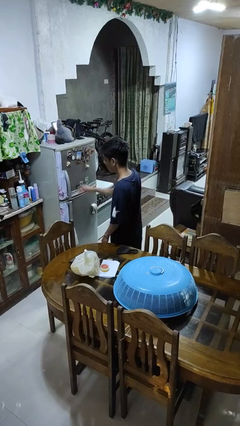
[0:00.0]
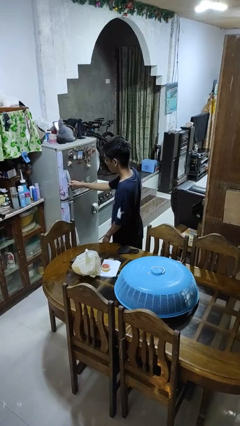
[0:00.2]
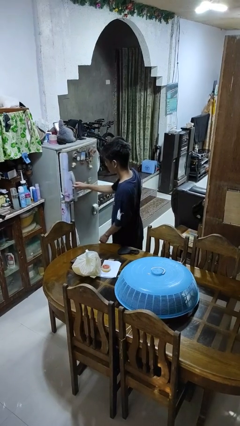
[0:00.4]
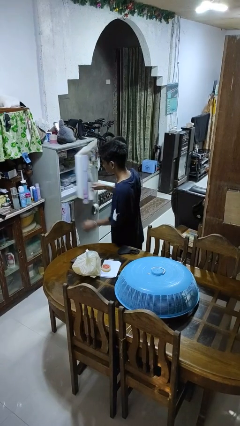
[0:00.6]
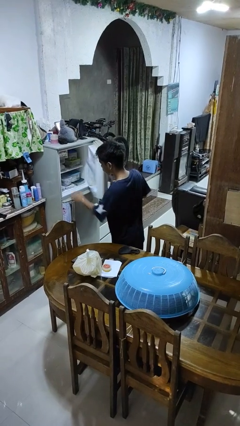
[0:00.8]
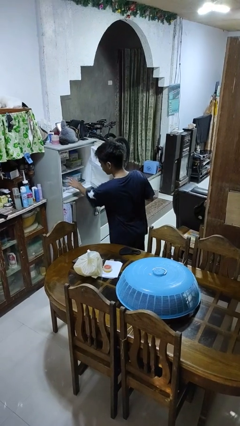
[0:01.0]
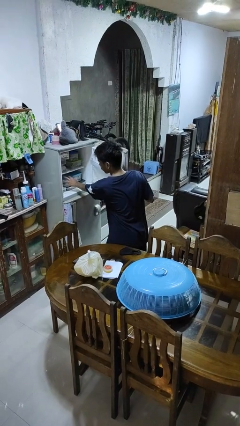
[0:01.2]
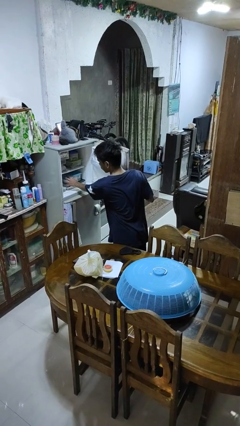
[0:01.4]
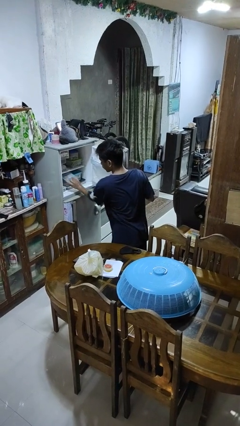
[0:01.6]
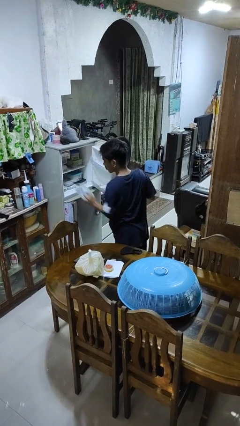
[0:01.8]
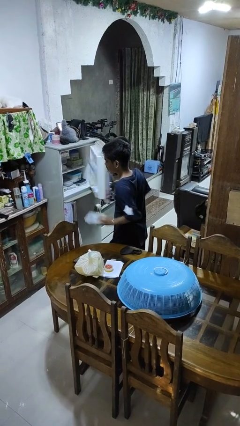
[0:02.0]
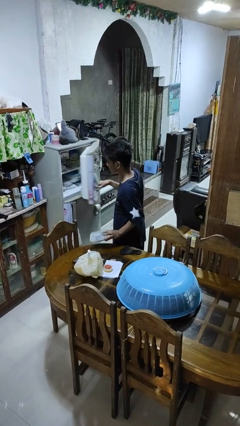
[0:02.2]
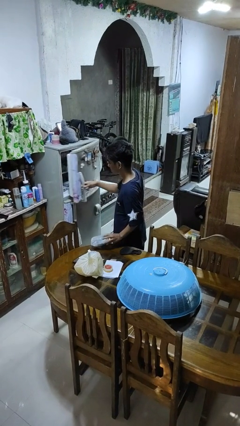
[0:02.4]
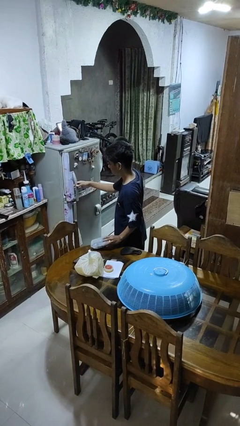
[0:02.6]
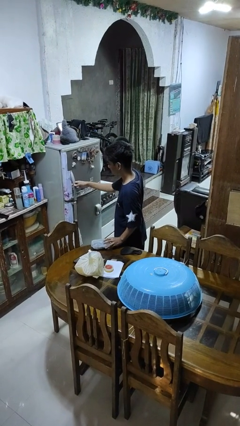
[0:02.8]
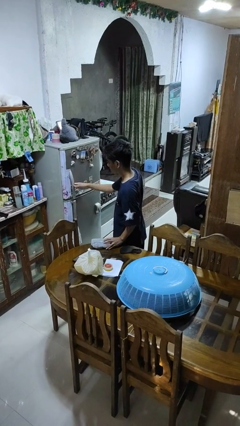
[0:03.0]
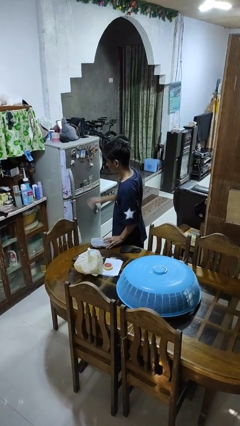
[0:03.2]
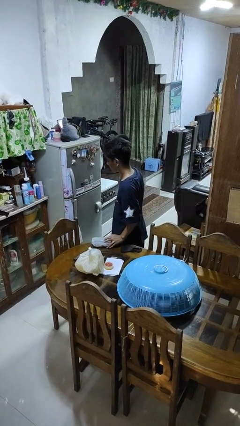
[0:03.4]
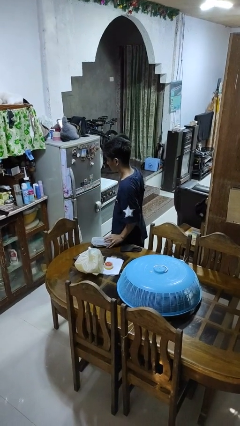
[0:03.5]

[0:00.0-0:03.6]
person takes object from refrigerator

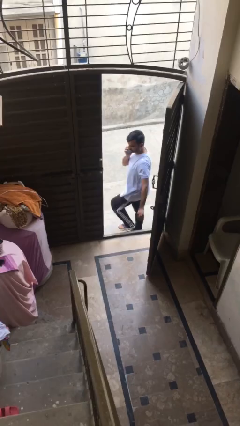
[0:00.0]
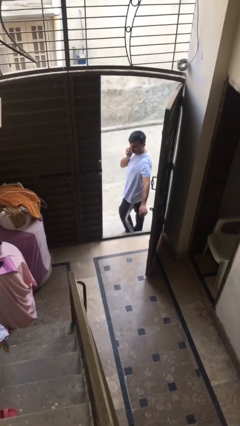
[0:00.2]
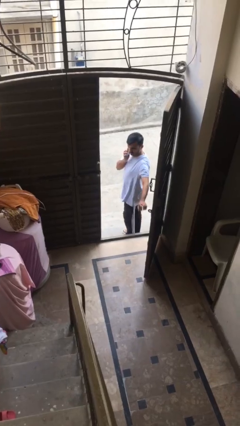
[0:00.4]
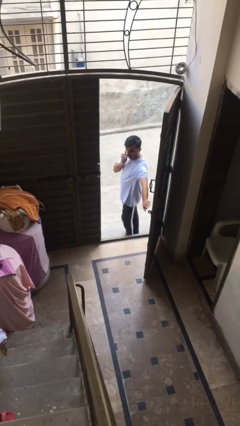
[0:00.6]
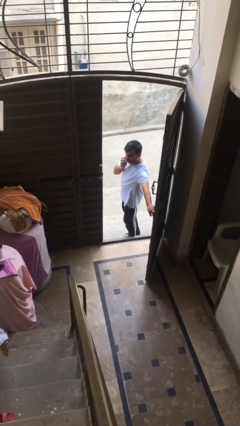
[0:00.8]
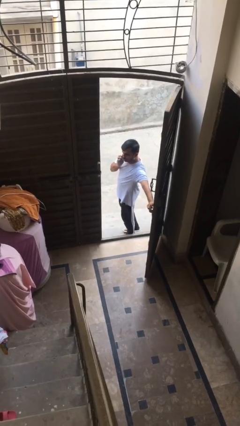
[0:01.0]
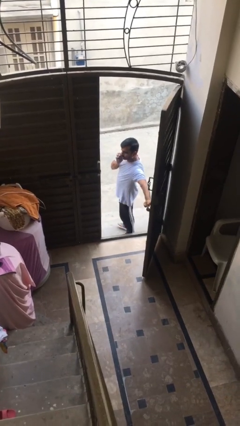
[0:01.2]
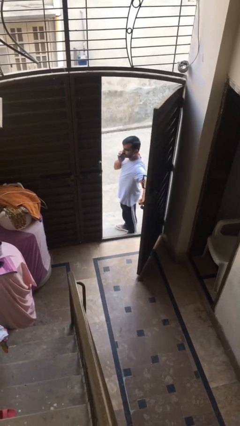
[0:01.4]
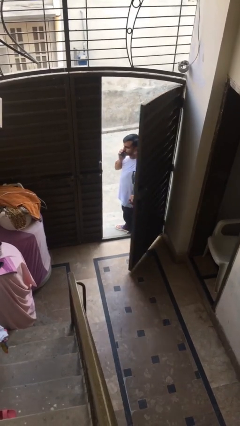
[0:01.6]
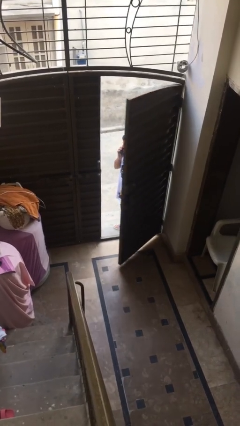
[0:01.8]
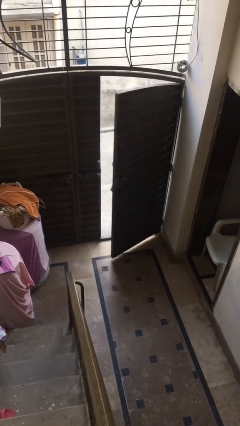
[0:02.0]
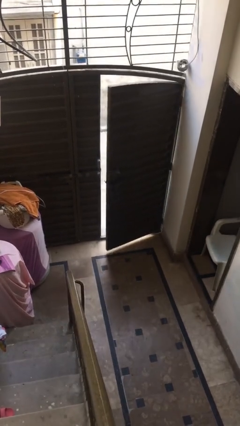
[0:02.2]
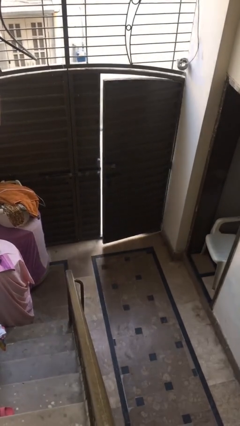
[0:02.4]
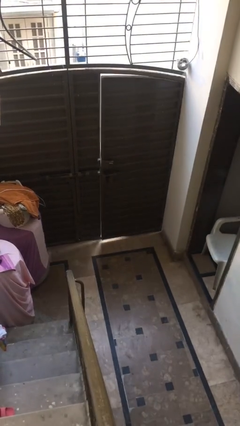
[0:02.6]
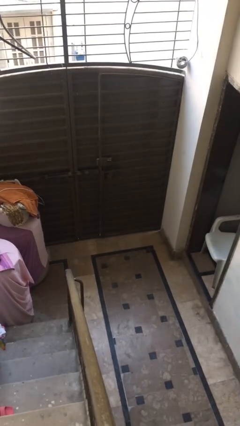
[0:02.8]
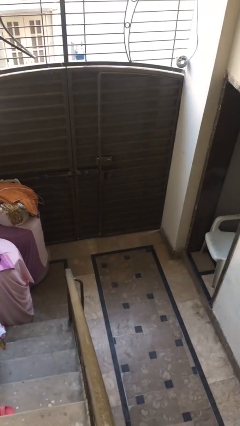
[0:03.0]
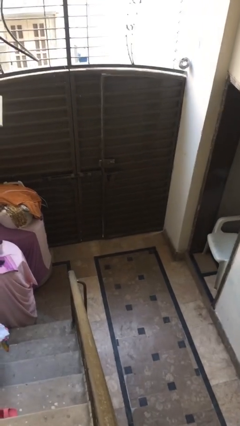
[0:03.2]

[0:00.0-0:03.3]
person closes facility door

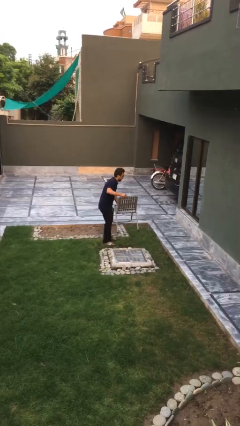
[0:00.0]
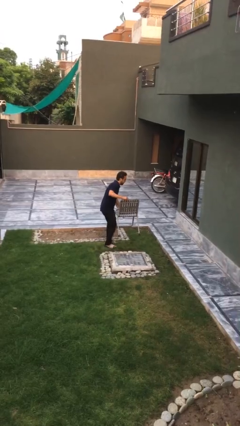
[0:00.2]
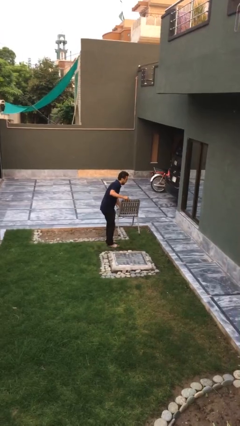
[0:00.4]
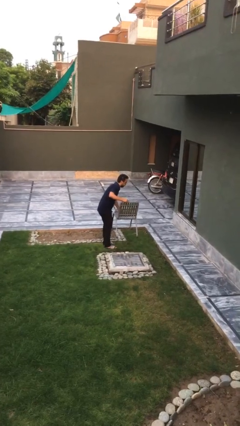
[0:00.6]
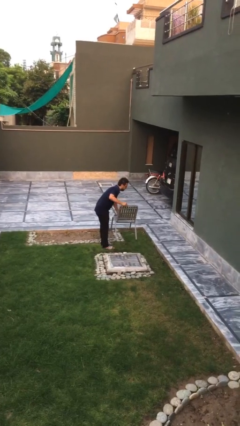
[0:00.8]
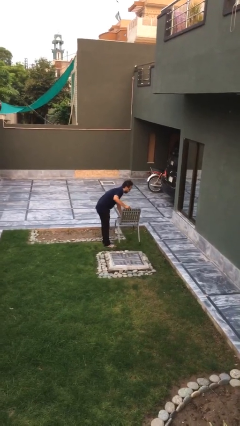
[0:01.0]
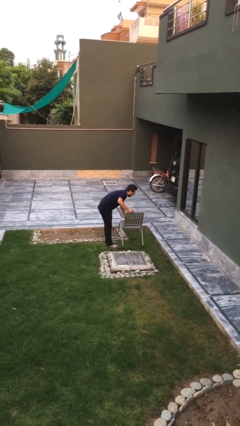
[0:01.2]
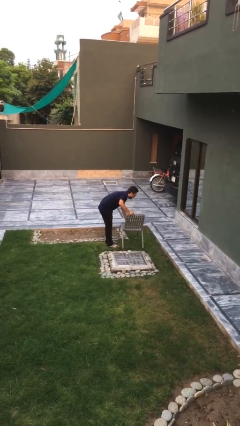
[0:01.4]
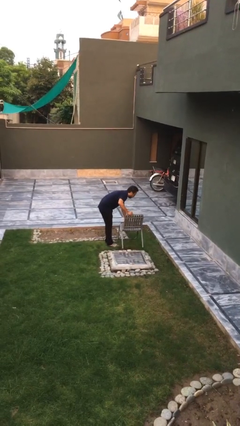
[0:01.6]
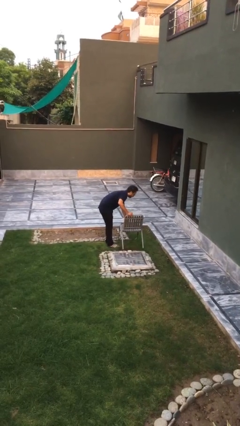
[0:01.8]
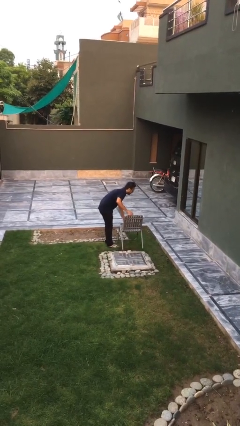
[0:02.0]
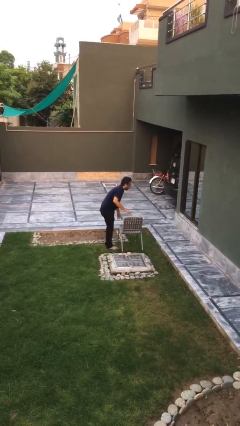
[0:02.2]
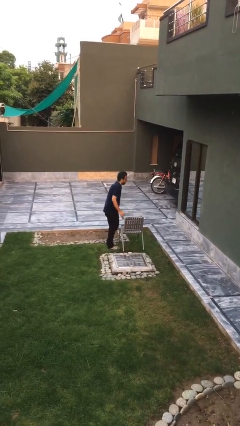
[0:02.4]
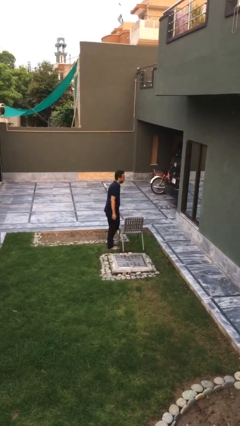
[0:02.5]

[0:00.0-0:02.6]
person puts down object on floor

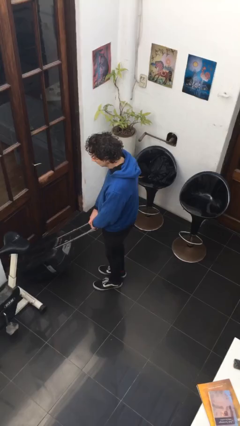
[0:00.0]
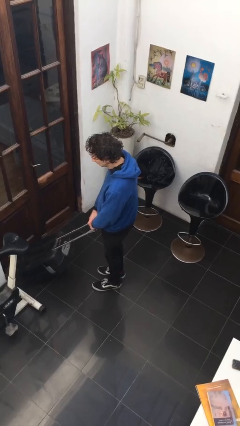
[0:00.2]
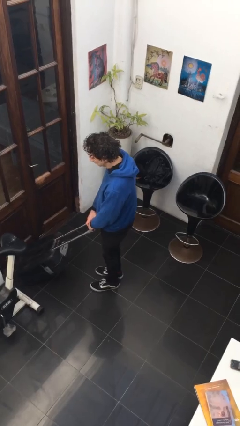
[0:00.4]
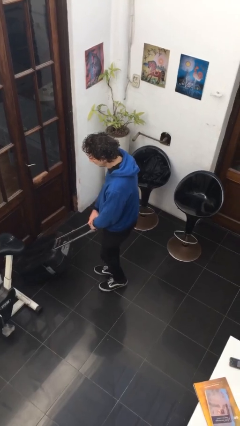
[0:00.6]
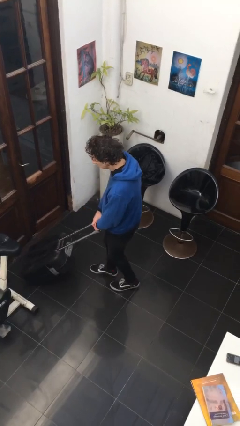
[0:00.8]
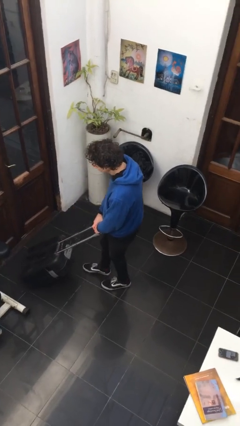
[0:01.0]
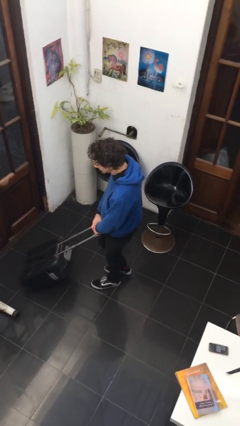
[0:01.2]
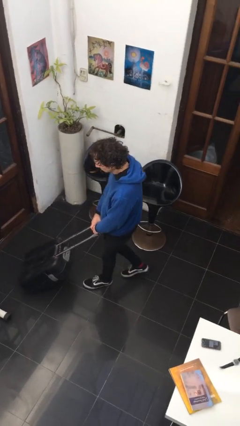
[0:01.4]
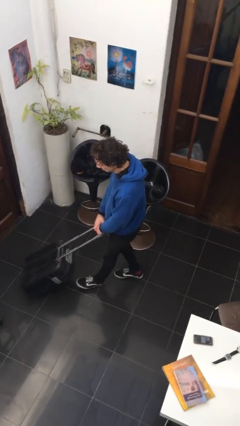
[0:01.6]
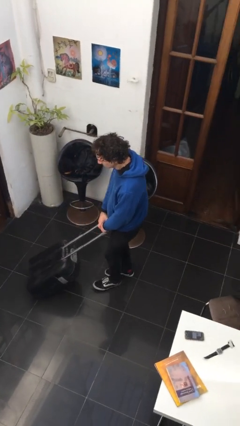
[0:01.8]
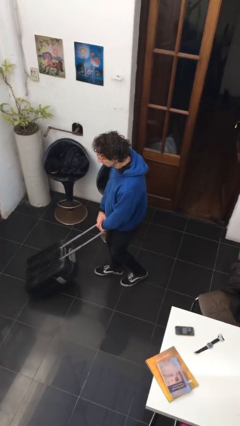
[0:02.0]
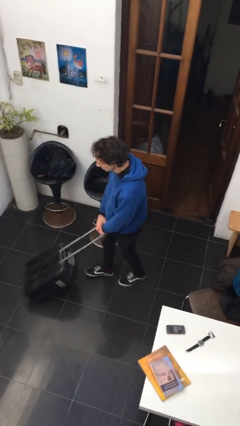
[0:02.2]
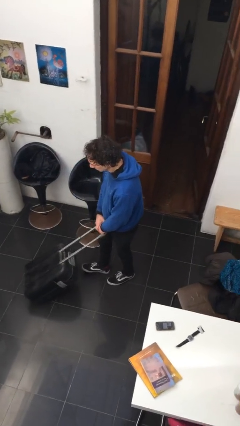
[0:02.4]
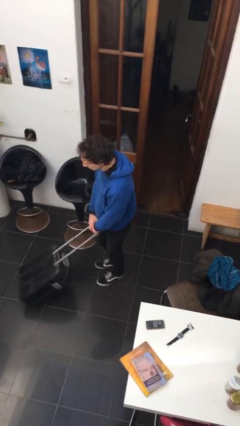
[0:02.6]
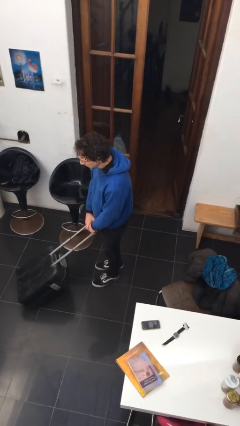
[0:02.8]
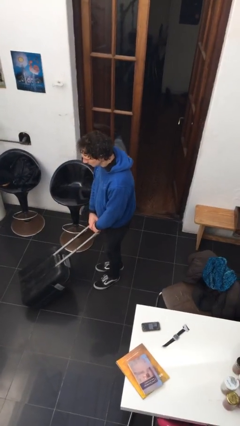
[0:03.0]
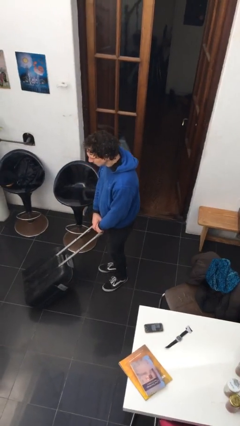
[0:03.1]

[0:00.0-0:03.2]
person pulls wheeled cart

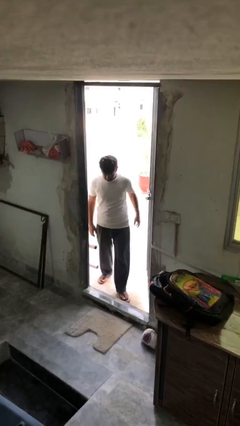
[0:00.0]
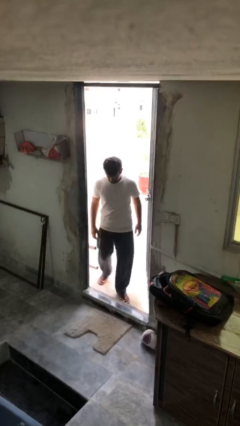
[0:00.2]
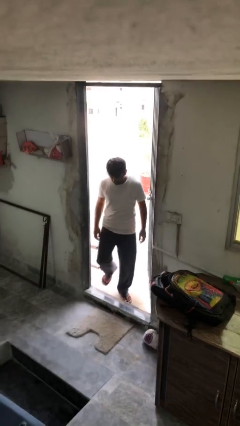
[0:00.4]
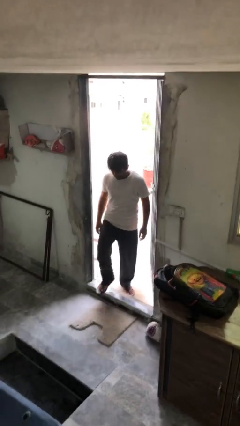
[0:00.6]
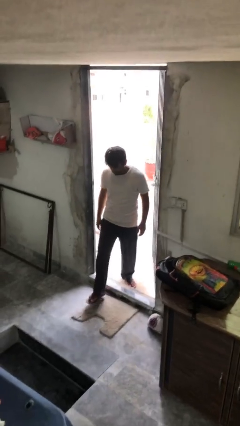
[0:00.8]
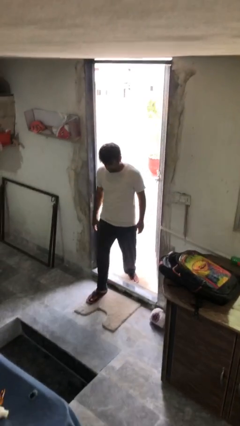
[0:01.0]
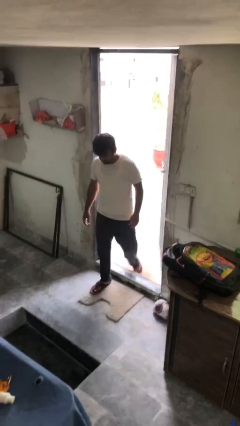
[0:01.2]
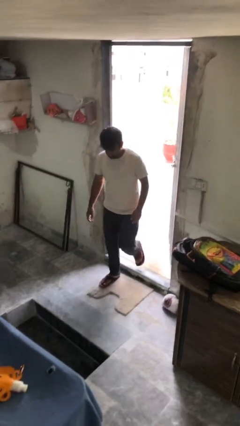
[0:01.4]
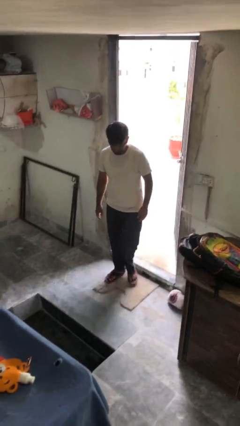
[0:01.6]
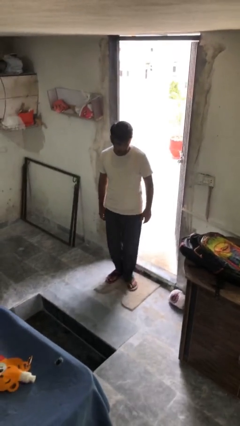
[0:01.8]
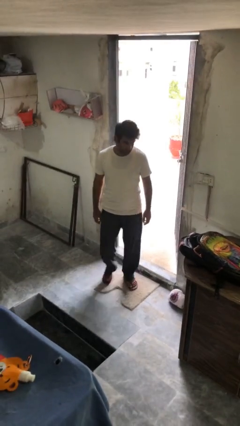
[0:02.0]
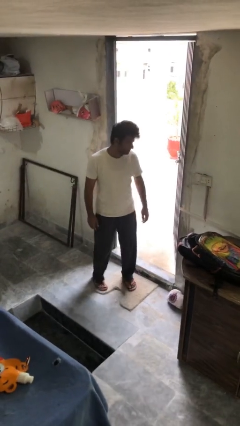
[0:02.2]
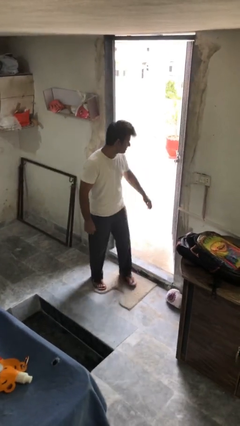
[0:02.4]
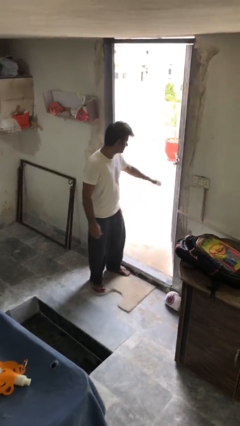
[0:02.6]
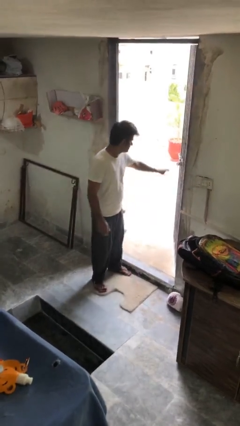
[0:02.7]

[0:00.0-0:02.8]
person enters scene through structure

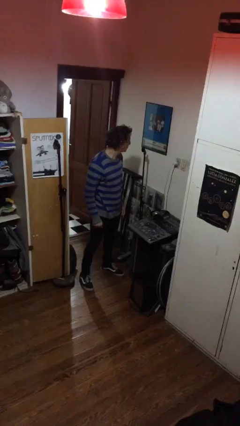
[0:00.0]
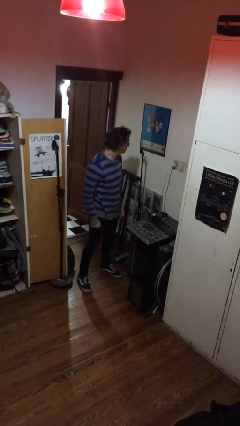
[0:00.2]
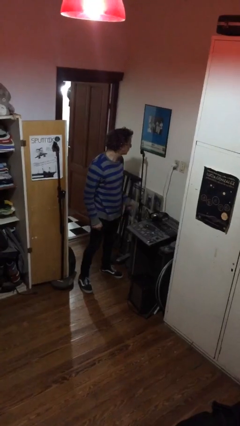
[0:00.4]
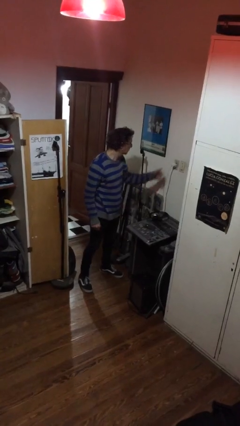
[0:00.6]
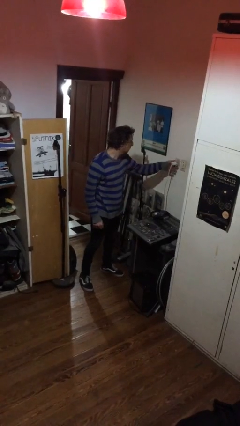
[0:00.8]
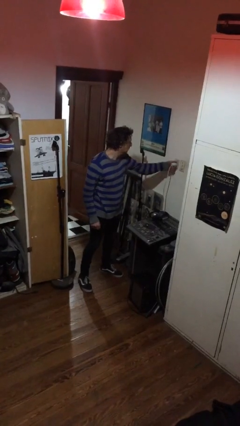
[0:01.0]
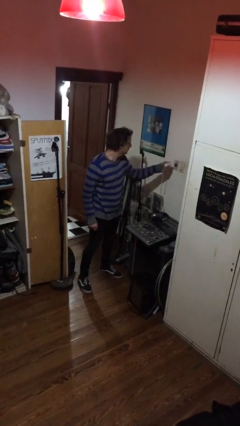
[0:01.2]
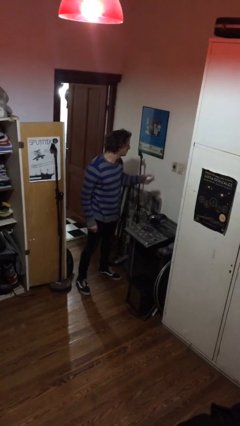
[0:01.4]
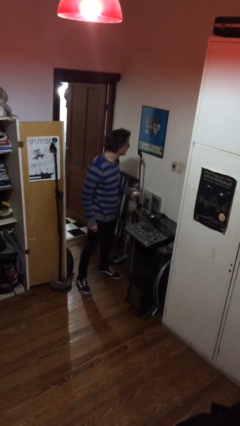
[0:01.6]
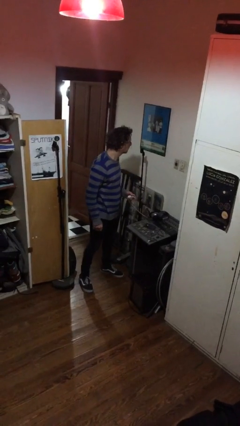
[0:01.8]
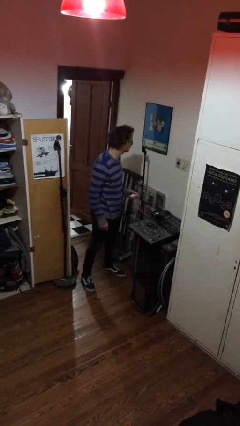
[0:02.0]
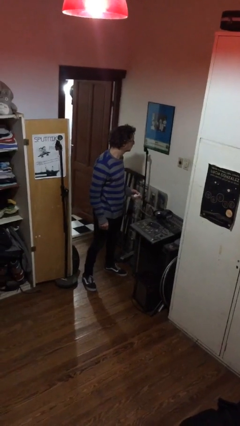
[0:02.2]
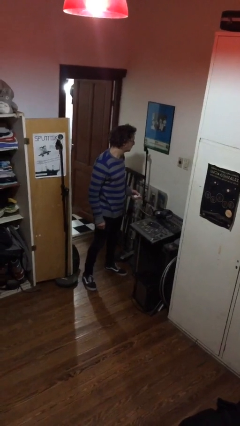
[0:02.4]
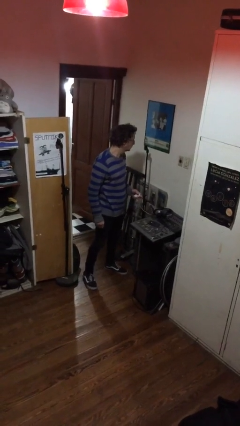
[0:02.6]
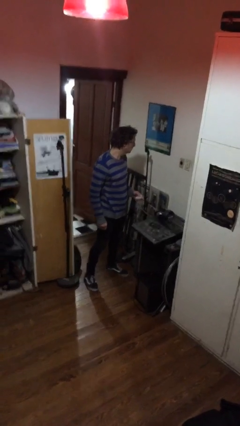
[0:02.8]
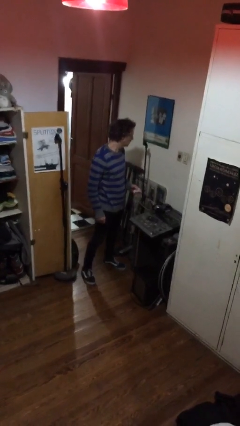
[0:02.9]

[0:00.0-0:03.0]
person unplugs from electrical socket
